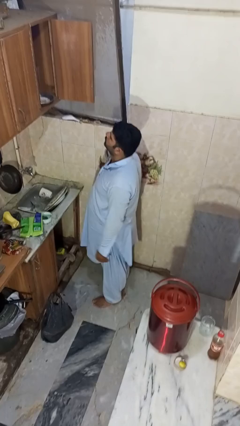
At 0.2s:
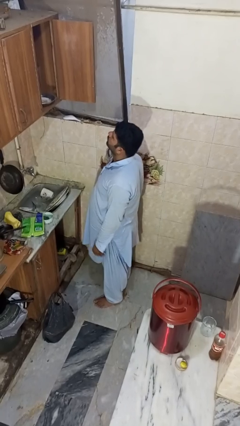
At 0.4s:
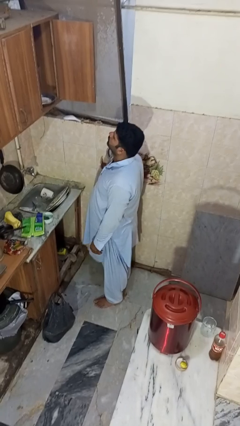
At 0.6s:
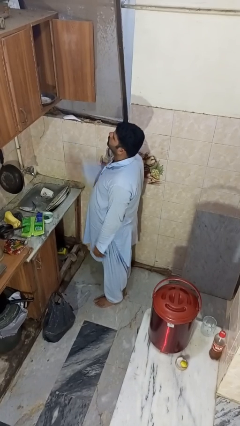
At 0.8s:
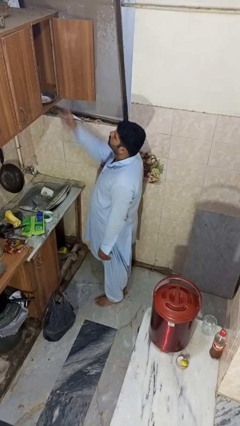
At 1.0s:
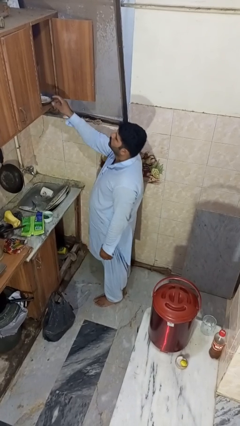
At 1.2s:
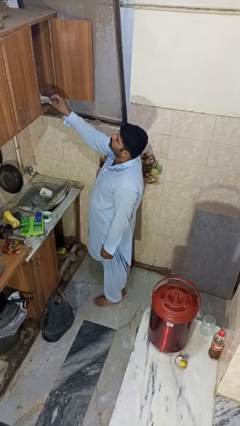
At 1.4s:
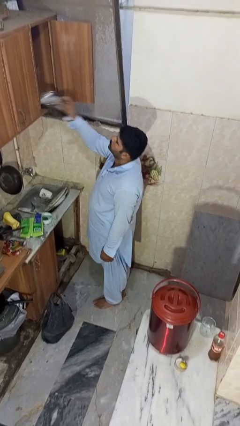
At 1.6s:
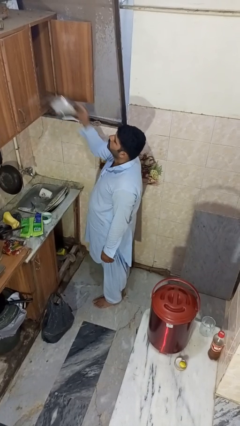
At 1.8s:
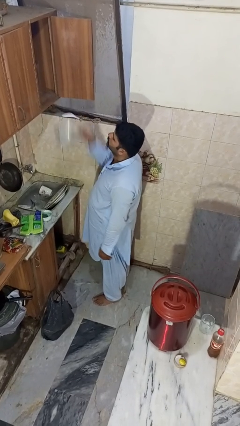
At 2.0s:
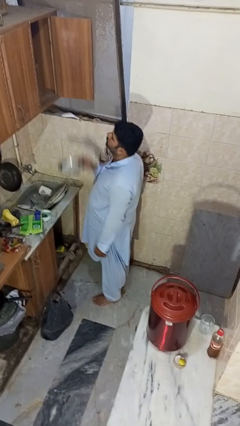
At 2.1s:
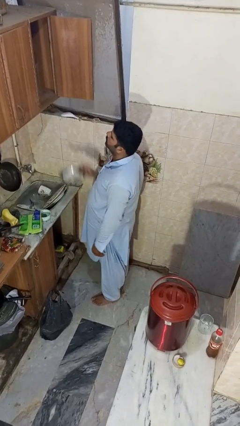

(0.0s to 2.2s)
person takes object from cabinet

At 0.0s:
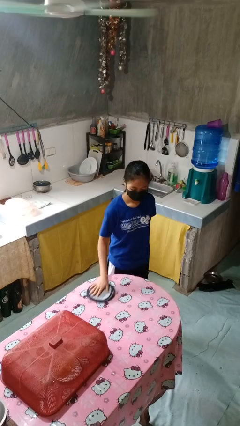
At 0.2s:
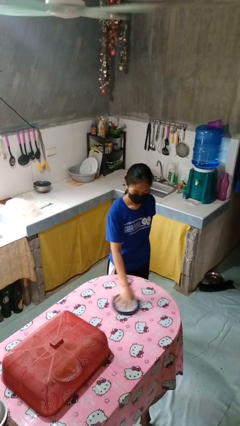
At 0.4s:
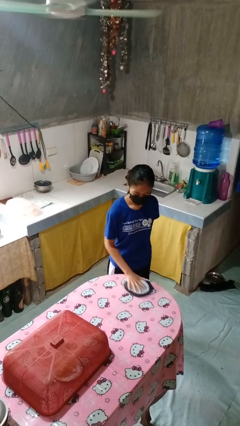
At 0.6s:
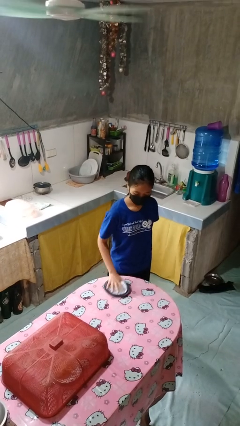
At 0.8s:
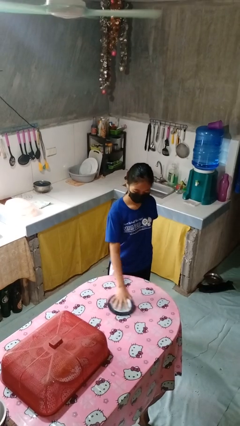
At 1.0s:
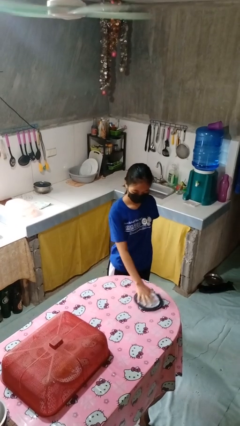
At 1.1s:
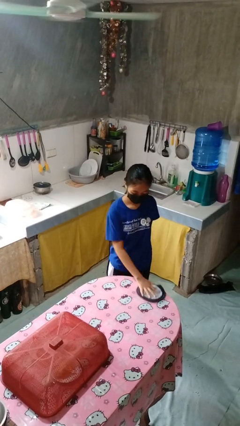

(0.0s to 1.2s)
person cleans table with rag

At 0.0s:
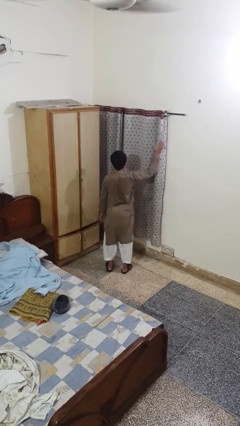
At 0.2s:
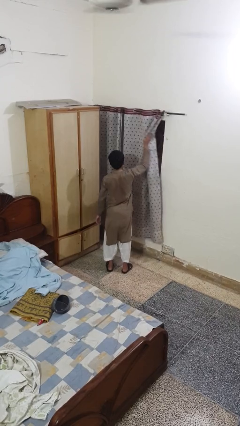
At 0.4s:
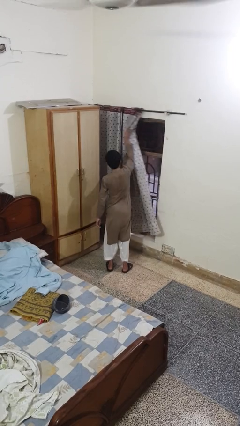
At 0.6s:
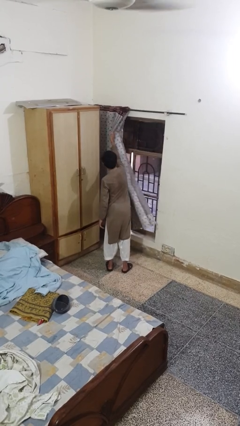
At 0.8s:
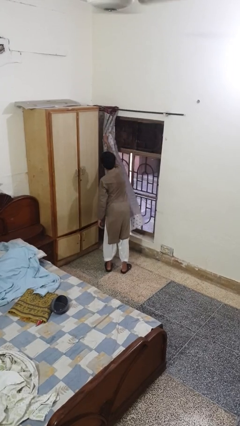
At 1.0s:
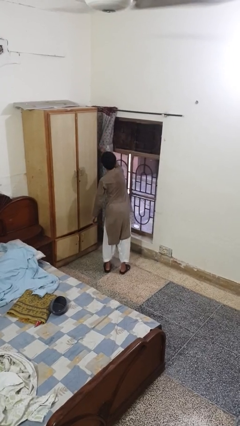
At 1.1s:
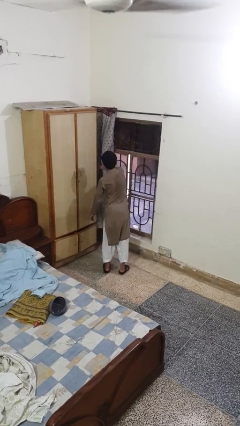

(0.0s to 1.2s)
person opens curtains

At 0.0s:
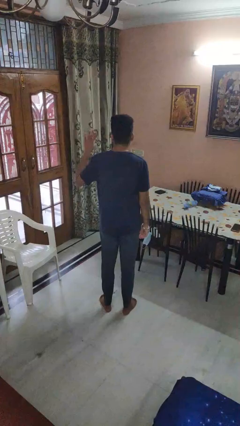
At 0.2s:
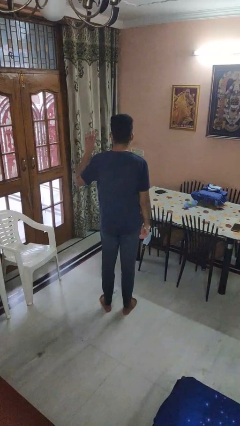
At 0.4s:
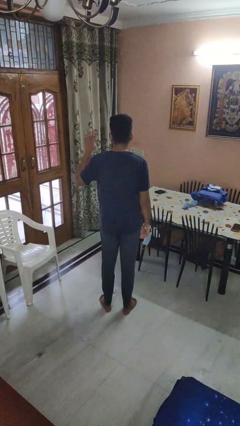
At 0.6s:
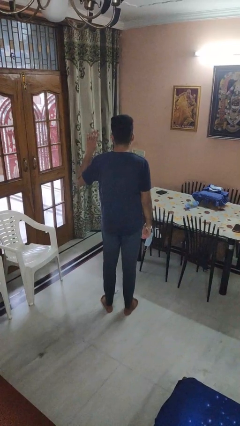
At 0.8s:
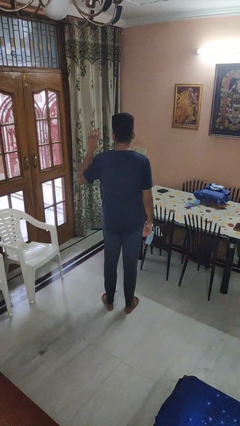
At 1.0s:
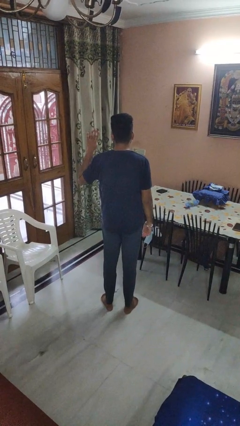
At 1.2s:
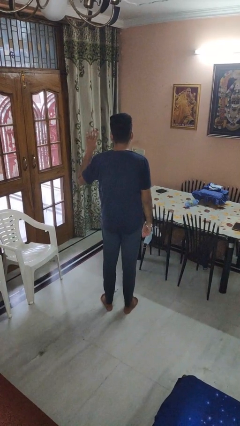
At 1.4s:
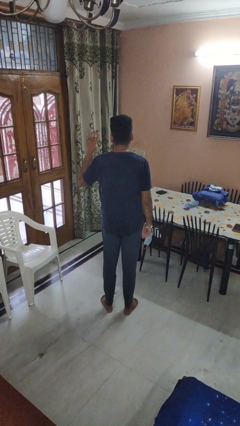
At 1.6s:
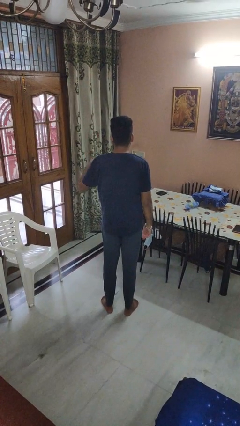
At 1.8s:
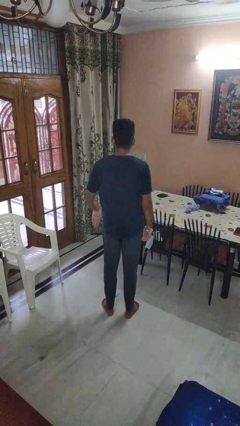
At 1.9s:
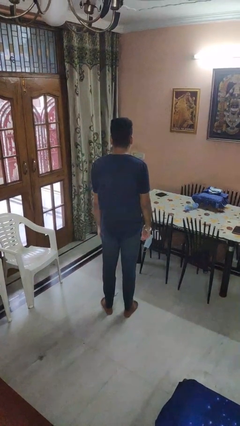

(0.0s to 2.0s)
person gestures number four

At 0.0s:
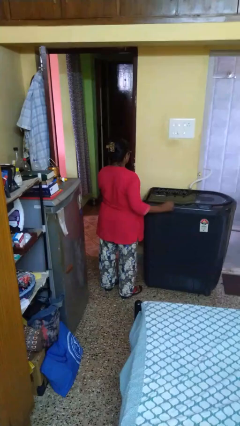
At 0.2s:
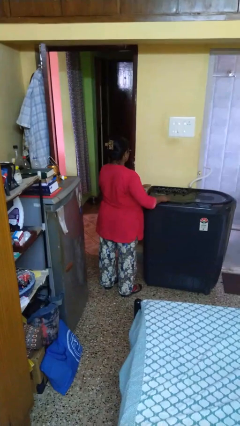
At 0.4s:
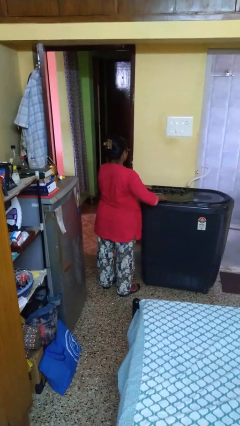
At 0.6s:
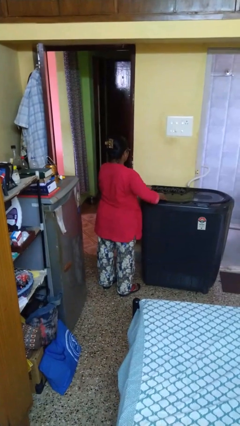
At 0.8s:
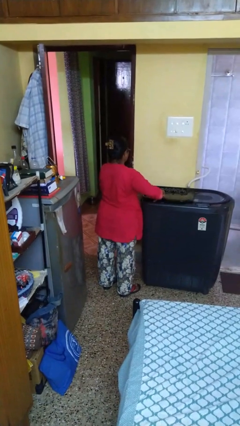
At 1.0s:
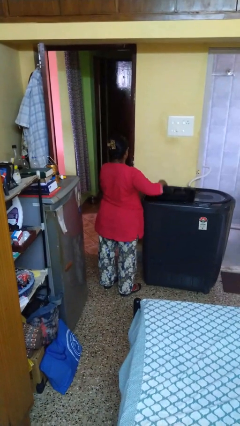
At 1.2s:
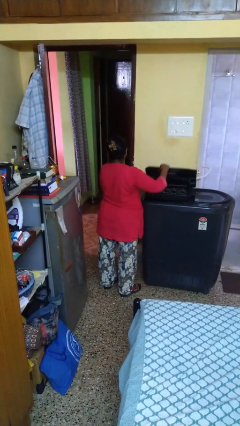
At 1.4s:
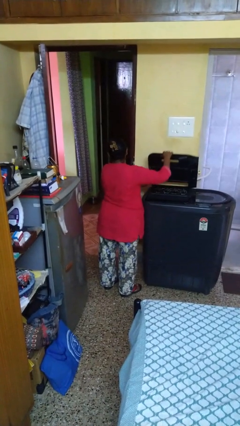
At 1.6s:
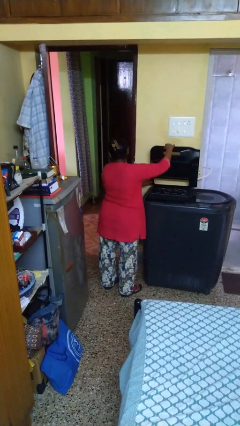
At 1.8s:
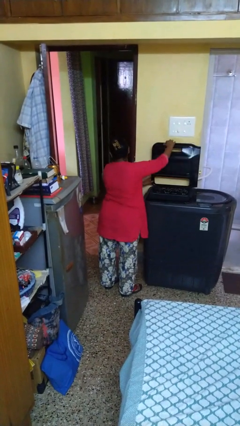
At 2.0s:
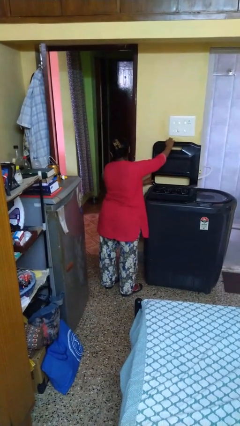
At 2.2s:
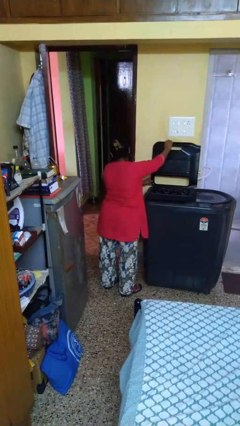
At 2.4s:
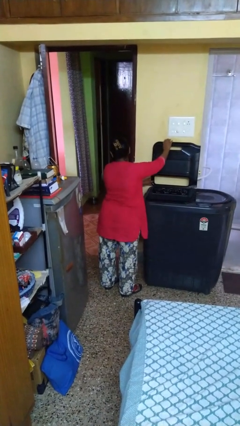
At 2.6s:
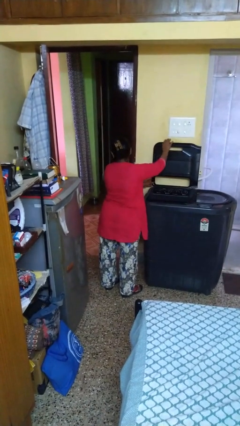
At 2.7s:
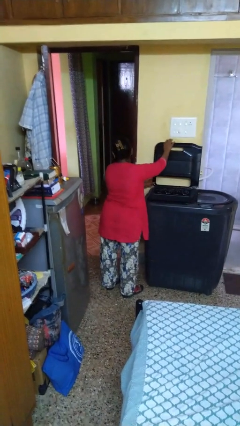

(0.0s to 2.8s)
person opens clothes washer

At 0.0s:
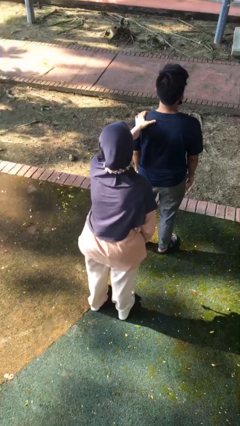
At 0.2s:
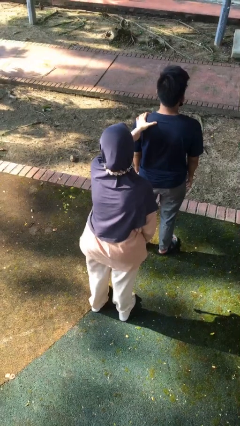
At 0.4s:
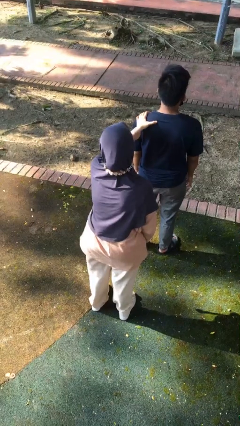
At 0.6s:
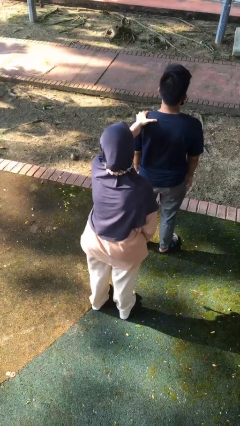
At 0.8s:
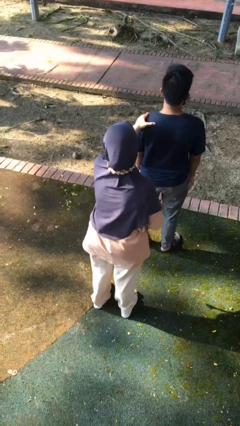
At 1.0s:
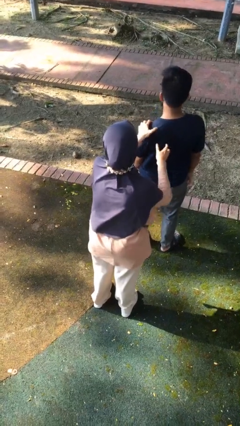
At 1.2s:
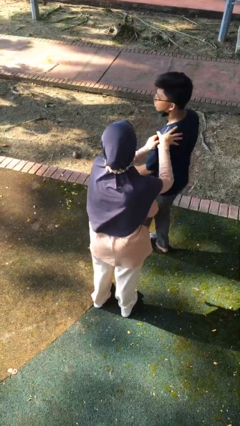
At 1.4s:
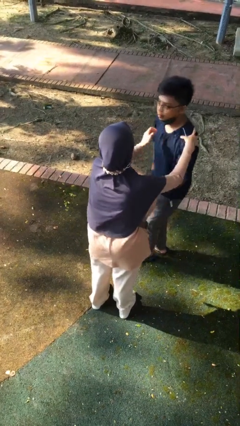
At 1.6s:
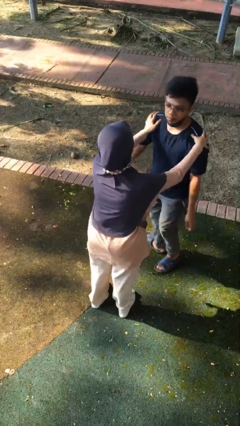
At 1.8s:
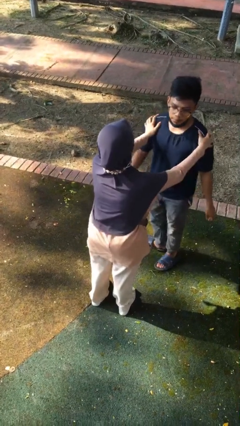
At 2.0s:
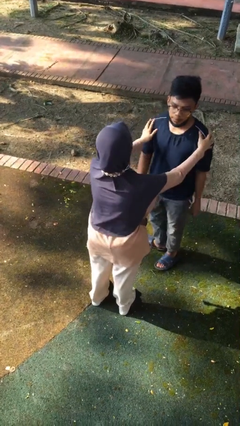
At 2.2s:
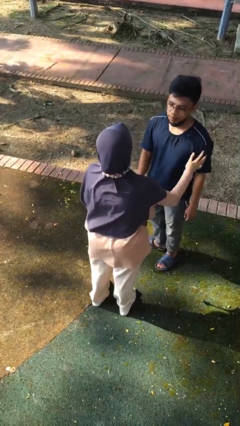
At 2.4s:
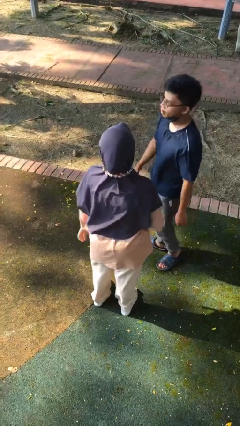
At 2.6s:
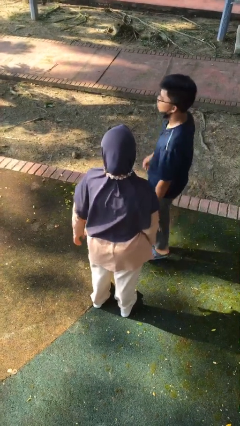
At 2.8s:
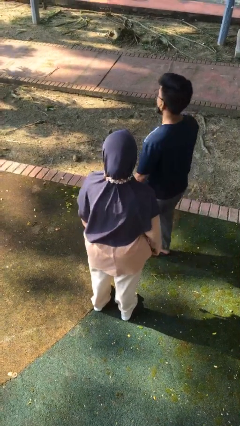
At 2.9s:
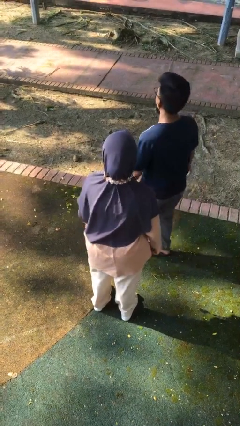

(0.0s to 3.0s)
person spins person around

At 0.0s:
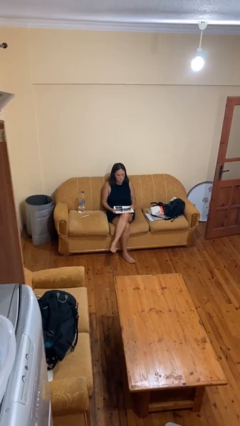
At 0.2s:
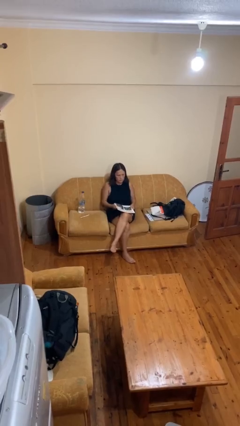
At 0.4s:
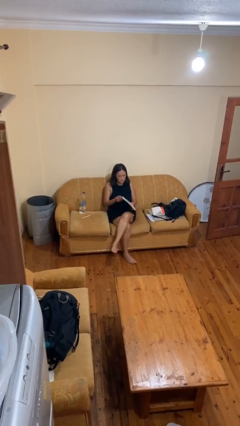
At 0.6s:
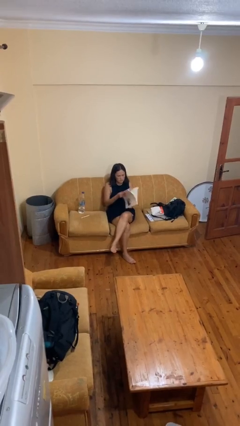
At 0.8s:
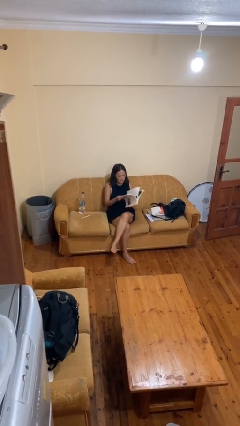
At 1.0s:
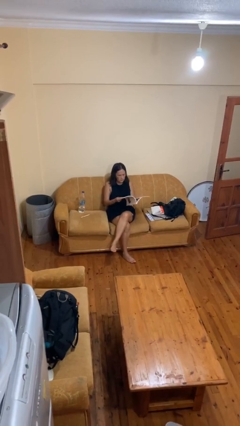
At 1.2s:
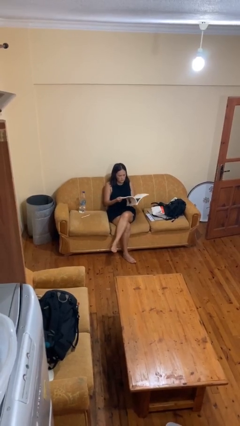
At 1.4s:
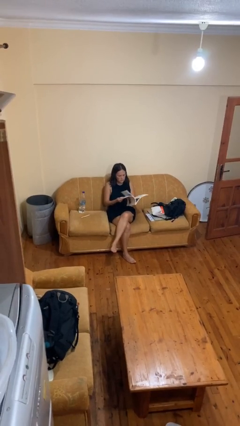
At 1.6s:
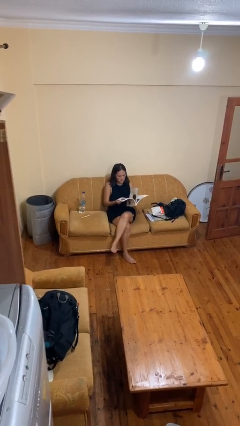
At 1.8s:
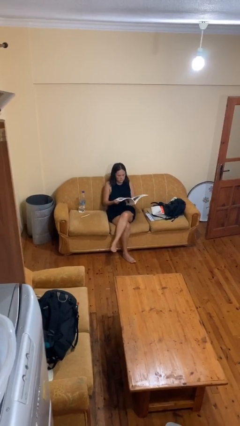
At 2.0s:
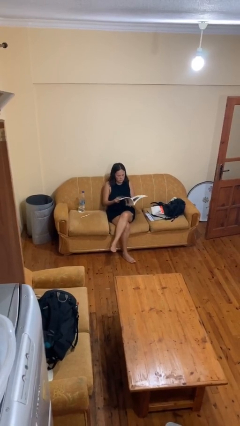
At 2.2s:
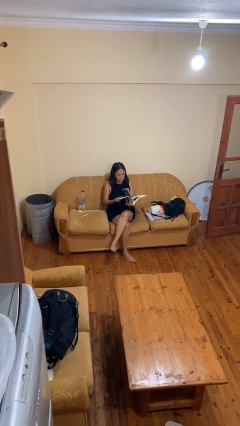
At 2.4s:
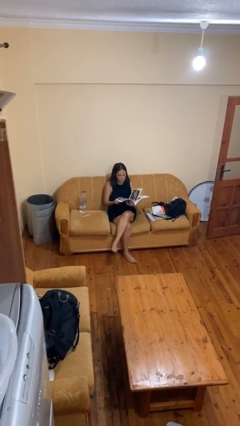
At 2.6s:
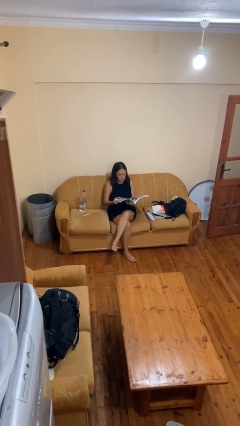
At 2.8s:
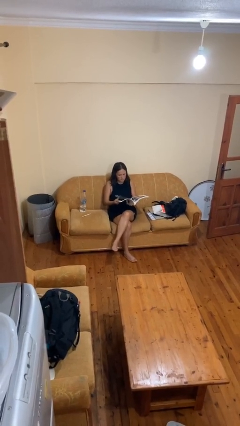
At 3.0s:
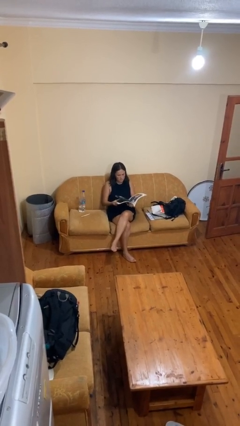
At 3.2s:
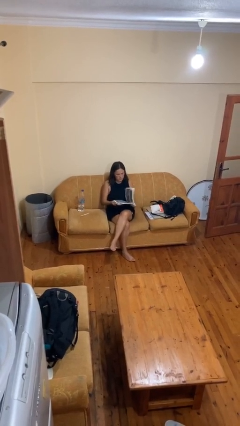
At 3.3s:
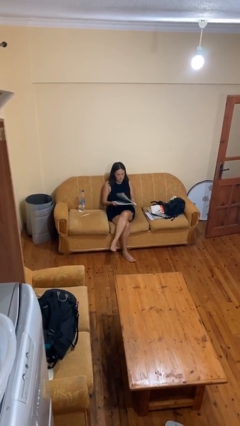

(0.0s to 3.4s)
person reads magazine

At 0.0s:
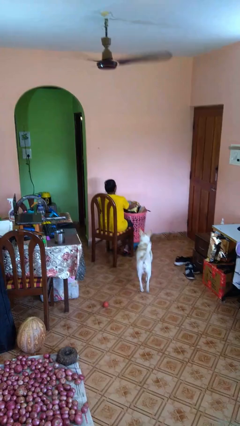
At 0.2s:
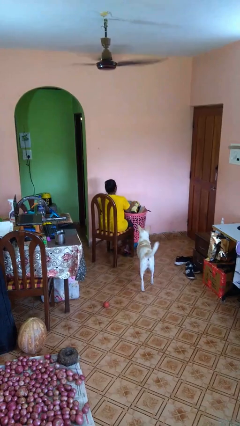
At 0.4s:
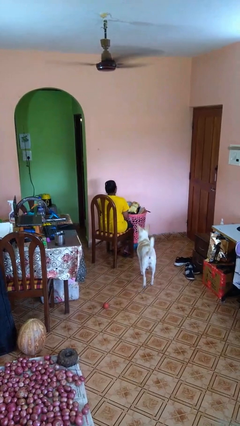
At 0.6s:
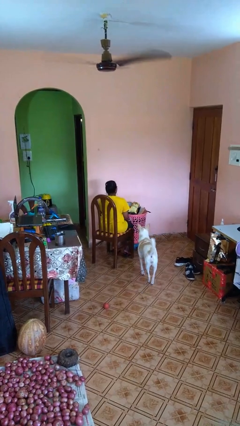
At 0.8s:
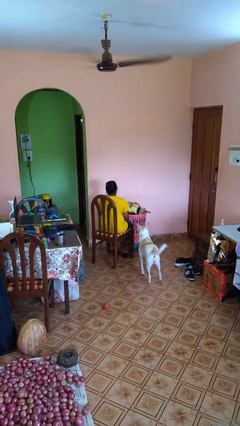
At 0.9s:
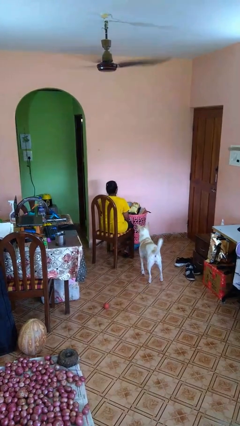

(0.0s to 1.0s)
person puts object into basket
